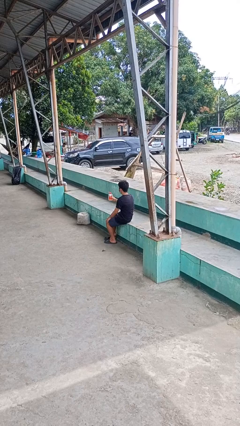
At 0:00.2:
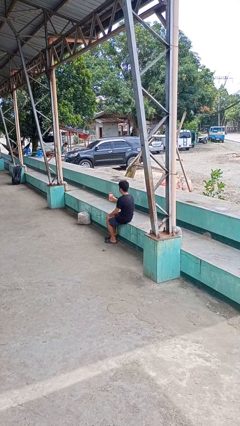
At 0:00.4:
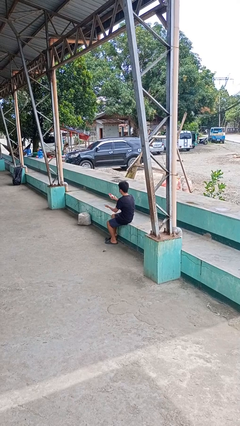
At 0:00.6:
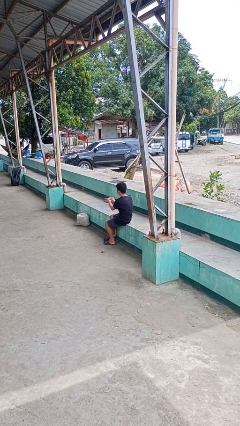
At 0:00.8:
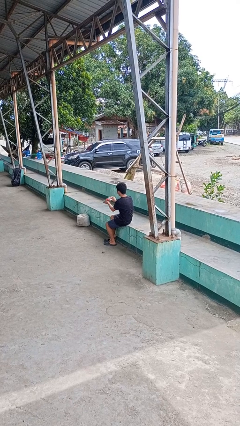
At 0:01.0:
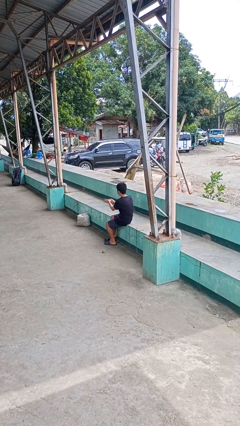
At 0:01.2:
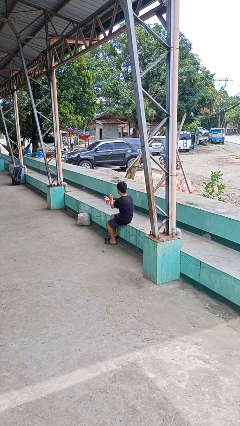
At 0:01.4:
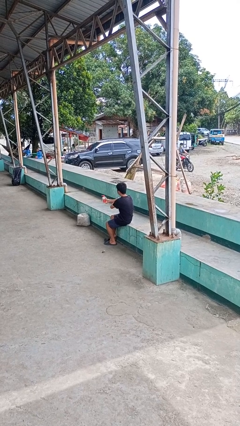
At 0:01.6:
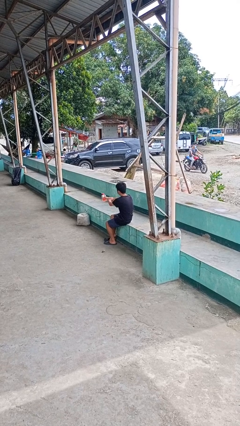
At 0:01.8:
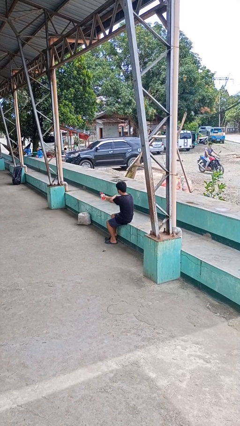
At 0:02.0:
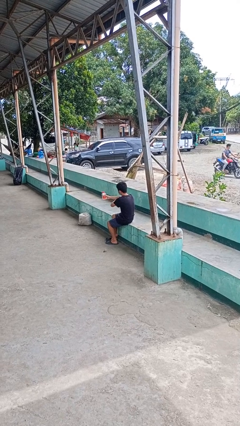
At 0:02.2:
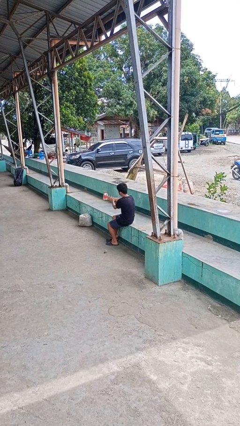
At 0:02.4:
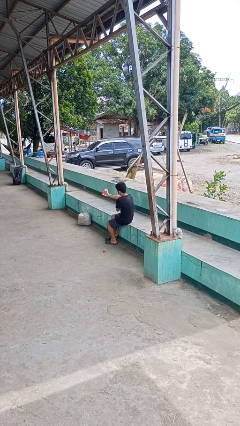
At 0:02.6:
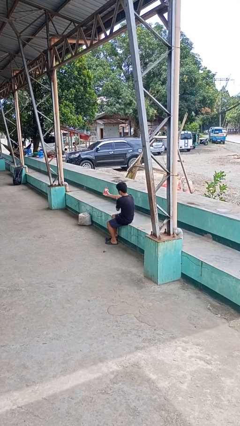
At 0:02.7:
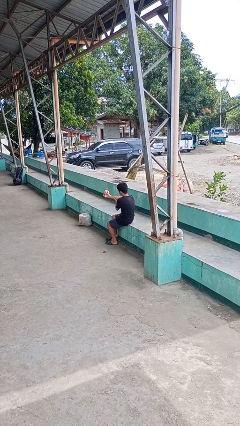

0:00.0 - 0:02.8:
person applies sunscreen

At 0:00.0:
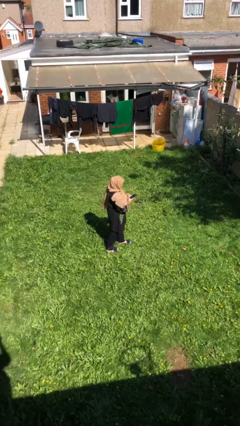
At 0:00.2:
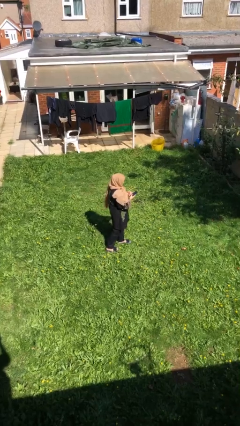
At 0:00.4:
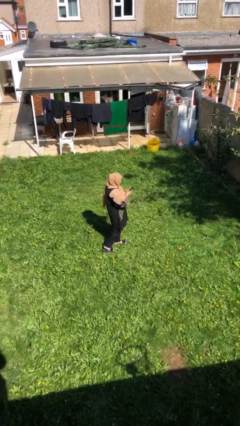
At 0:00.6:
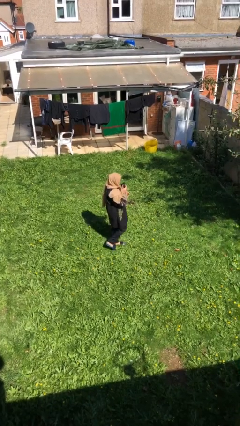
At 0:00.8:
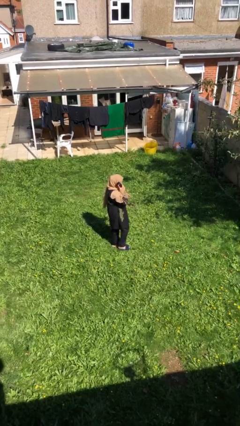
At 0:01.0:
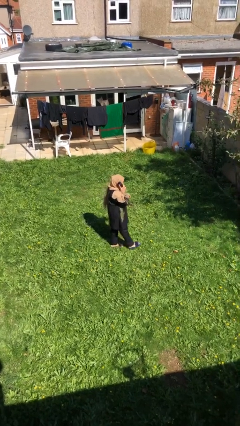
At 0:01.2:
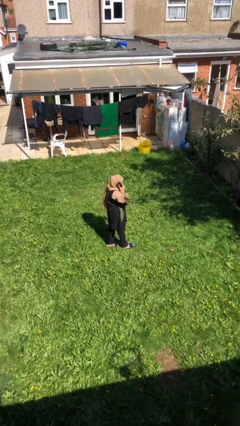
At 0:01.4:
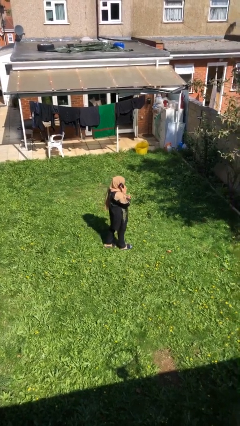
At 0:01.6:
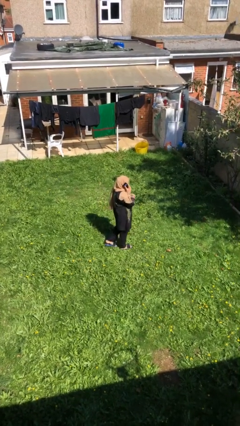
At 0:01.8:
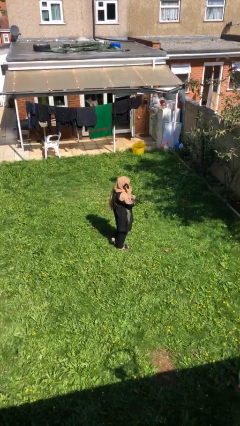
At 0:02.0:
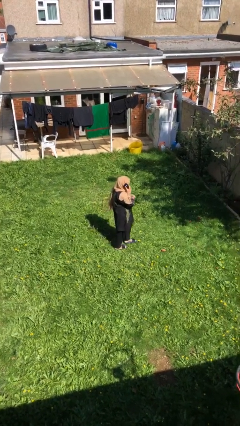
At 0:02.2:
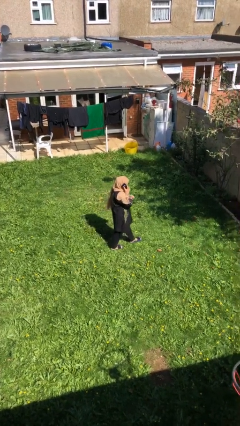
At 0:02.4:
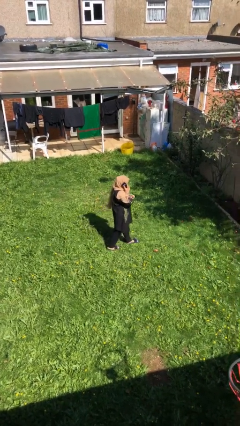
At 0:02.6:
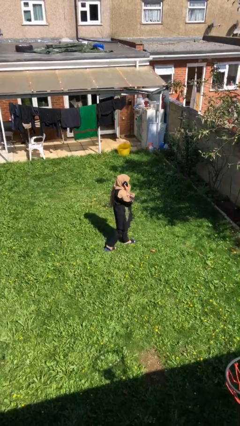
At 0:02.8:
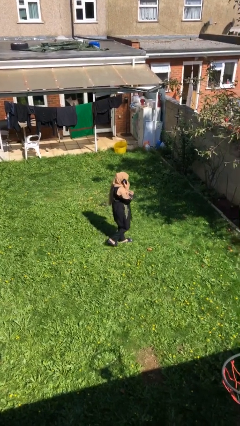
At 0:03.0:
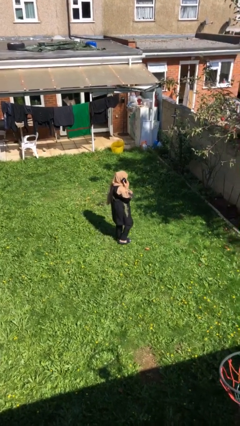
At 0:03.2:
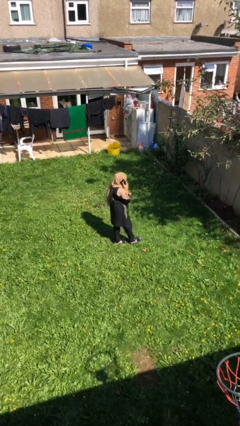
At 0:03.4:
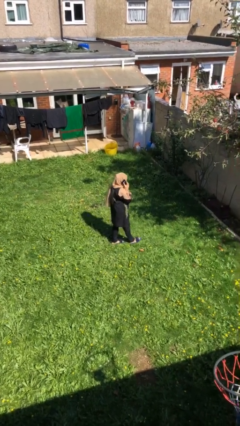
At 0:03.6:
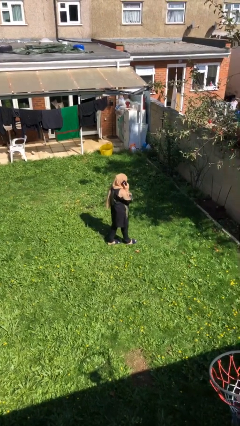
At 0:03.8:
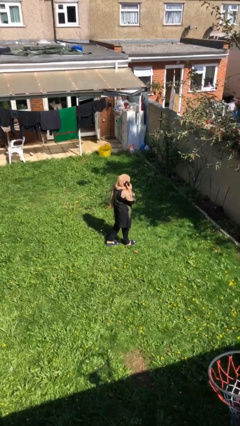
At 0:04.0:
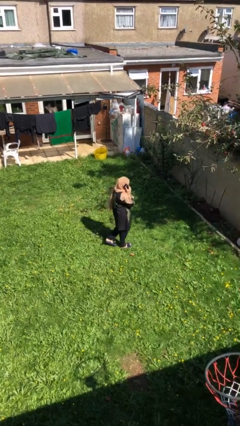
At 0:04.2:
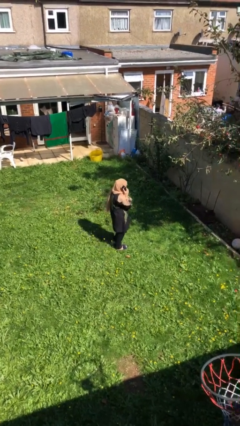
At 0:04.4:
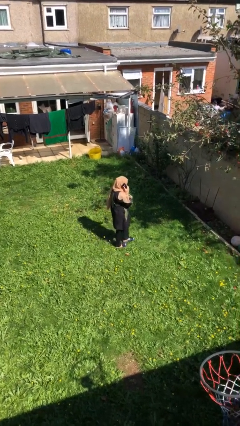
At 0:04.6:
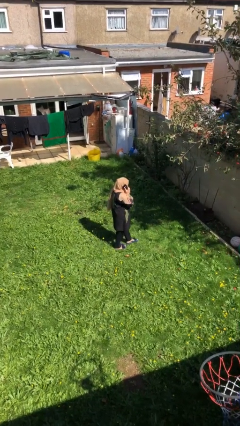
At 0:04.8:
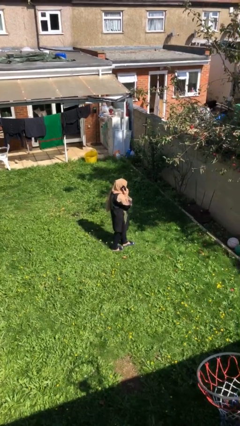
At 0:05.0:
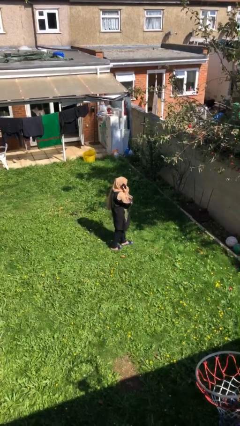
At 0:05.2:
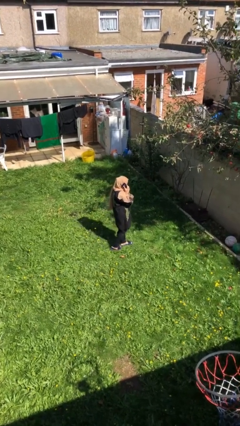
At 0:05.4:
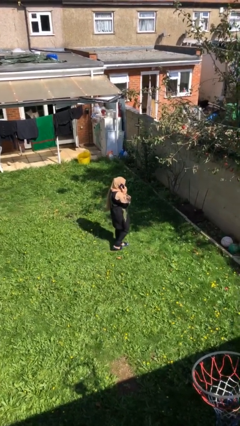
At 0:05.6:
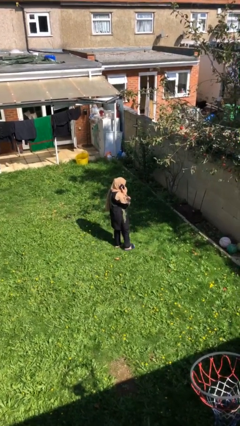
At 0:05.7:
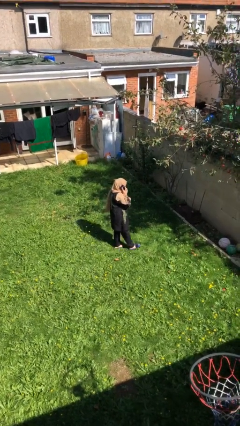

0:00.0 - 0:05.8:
person talks on phone

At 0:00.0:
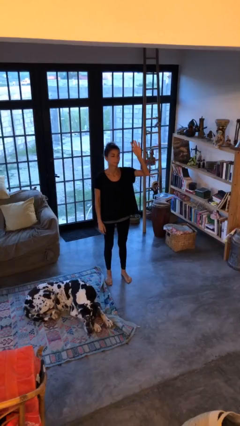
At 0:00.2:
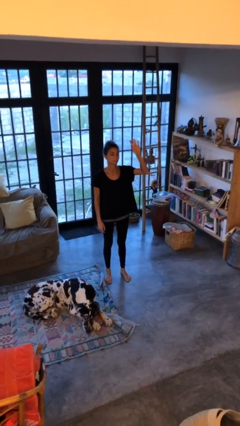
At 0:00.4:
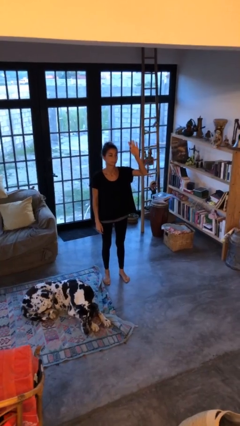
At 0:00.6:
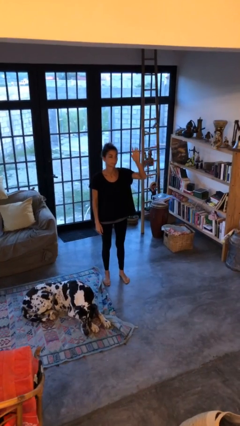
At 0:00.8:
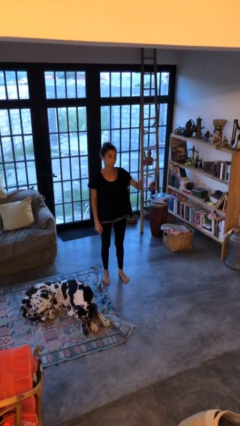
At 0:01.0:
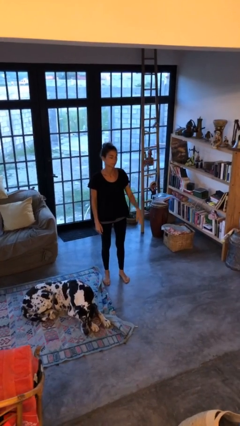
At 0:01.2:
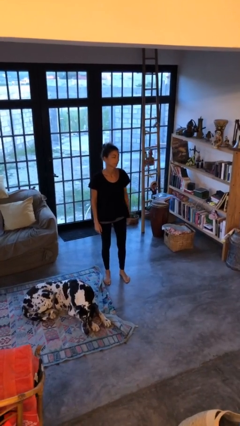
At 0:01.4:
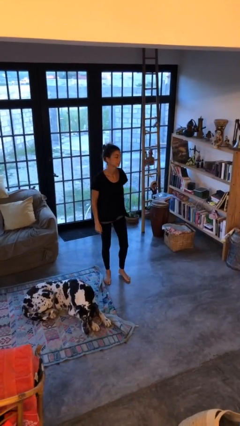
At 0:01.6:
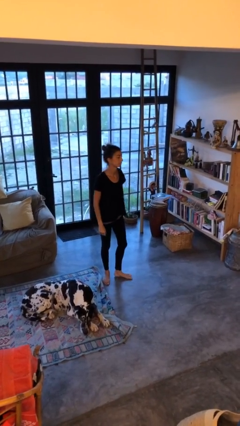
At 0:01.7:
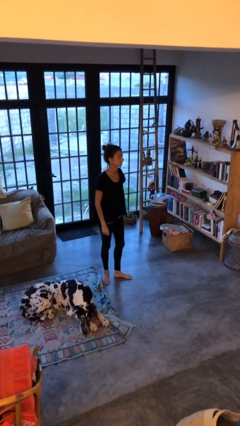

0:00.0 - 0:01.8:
person gestures lower hand

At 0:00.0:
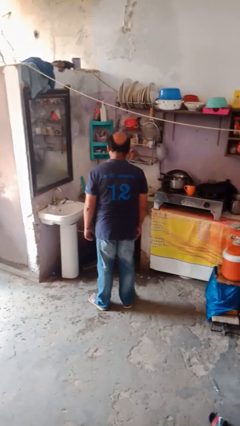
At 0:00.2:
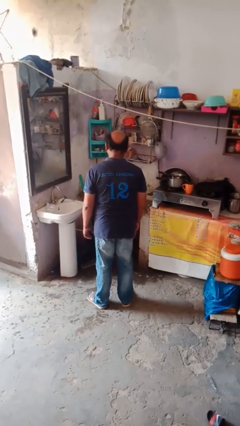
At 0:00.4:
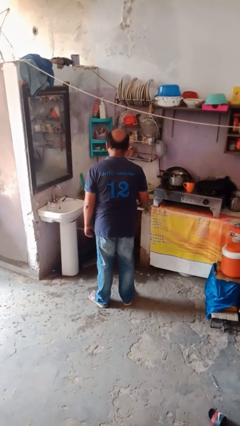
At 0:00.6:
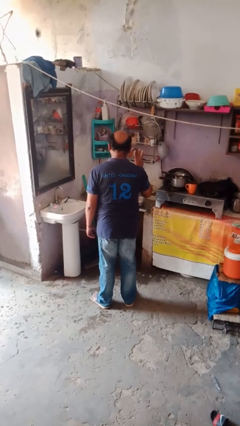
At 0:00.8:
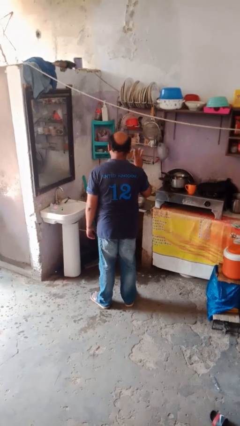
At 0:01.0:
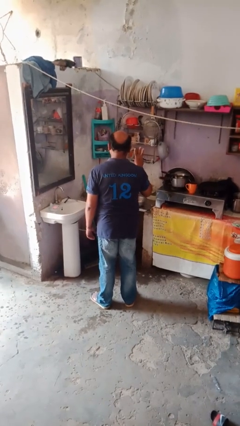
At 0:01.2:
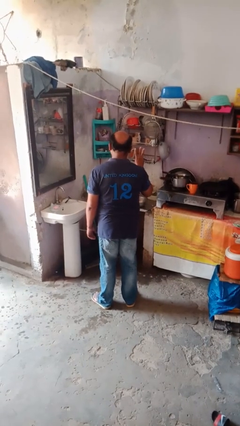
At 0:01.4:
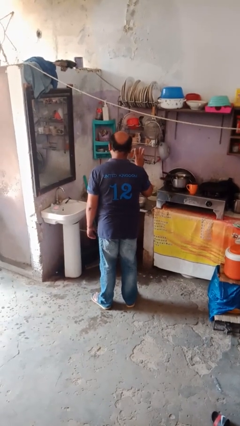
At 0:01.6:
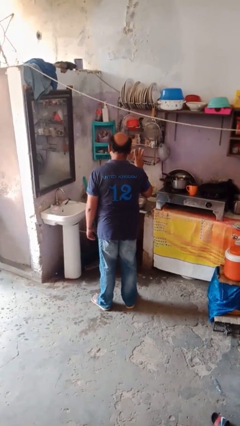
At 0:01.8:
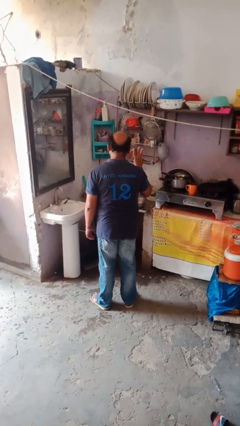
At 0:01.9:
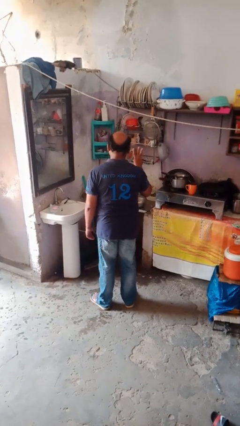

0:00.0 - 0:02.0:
person gestures number three

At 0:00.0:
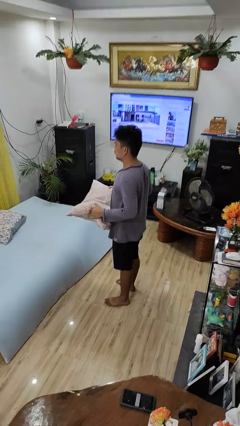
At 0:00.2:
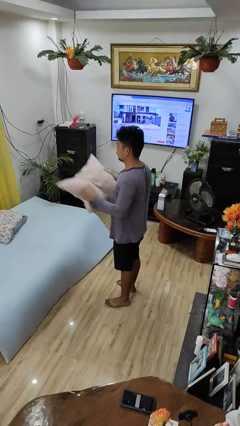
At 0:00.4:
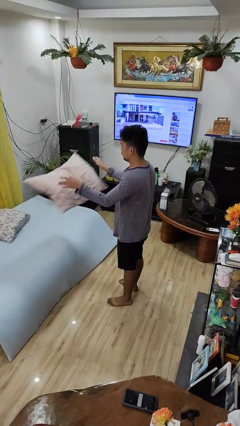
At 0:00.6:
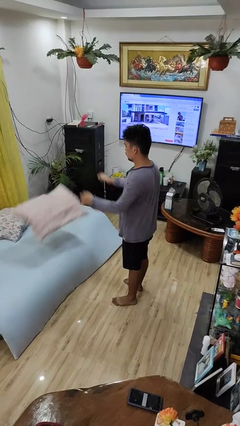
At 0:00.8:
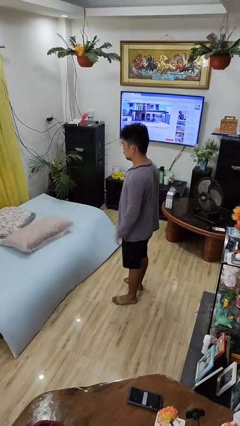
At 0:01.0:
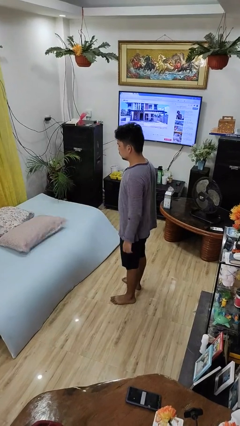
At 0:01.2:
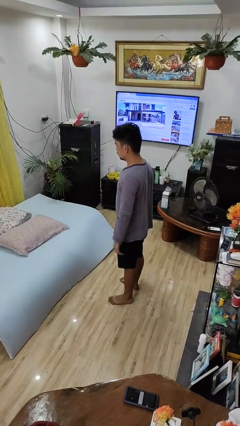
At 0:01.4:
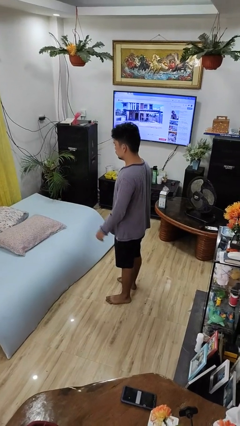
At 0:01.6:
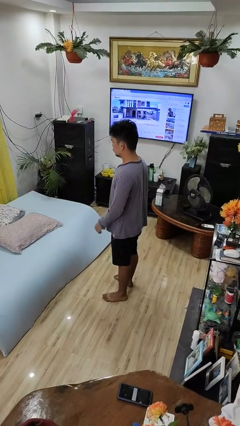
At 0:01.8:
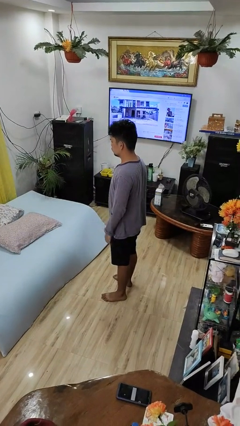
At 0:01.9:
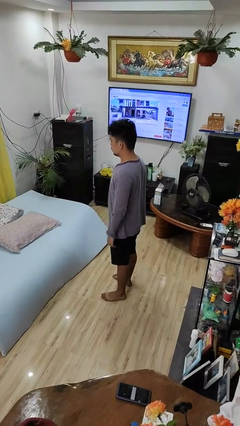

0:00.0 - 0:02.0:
person throws object on bed

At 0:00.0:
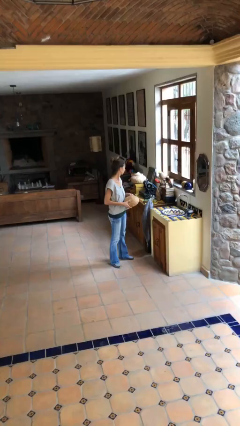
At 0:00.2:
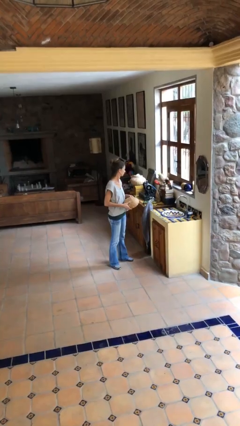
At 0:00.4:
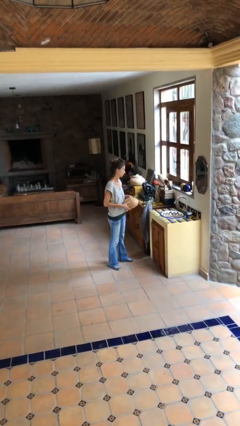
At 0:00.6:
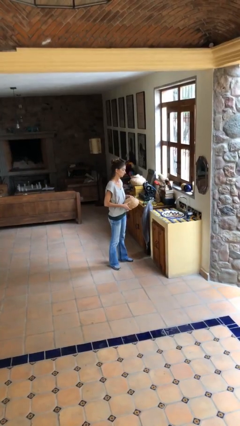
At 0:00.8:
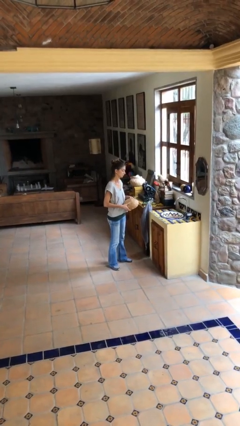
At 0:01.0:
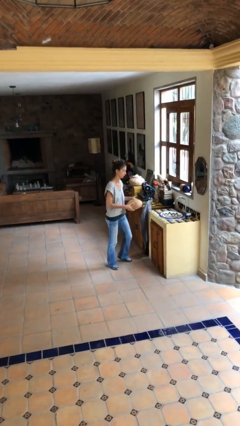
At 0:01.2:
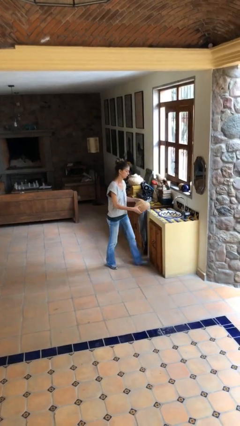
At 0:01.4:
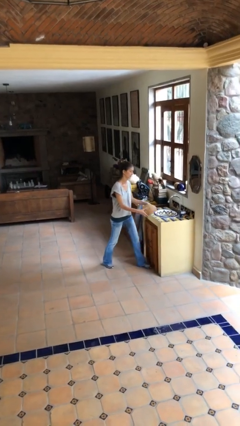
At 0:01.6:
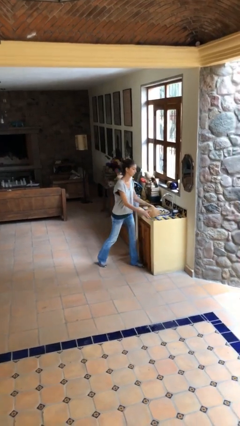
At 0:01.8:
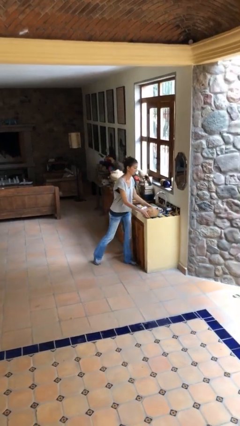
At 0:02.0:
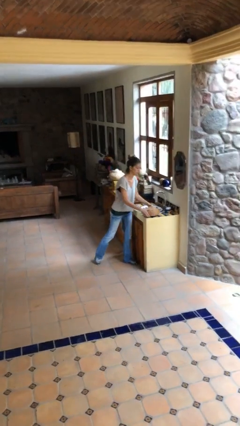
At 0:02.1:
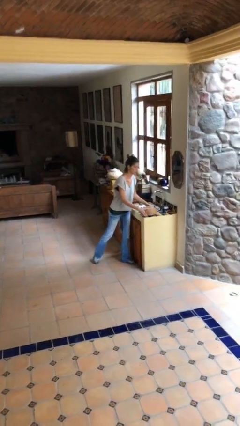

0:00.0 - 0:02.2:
person puts down object on table

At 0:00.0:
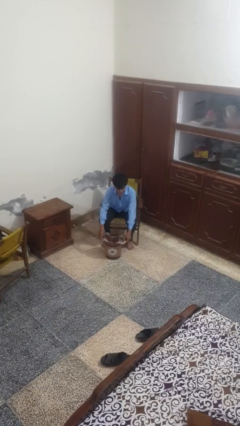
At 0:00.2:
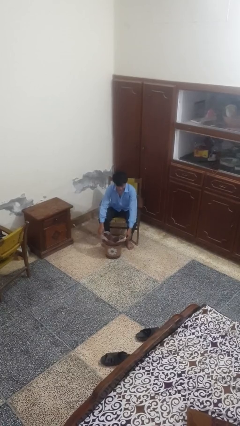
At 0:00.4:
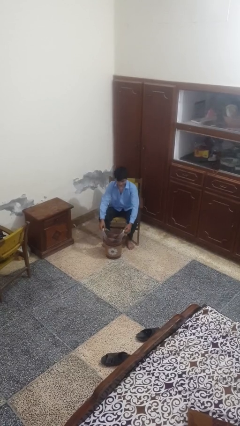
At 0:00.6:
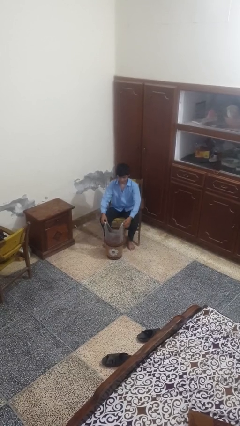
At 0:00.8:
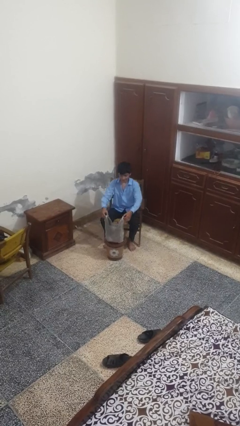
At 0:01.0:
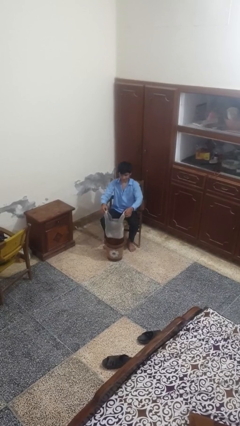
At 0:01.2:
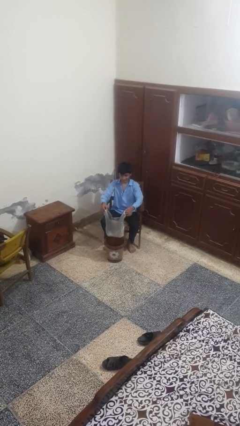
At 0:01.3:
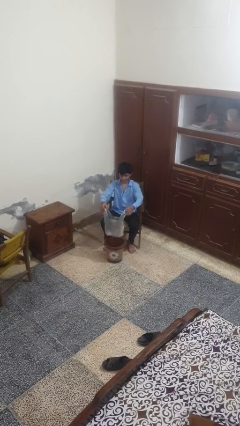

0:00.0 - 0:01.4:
person removes trashbag from trashcan
